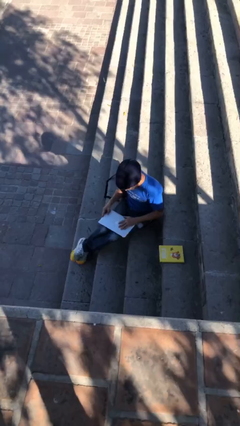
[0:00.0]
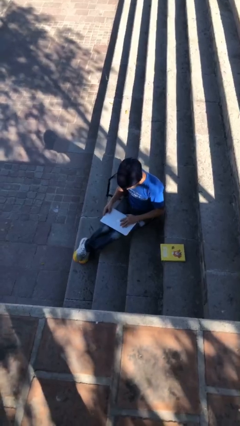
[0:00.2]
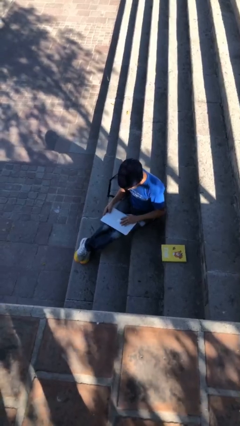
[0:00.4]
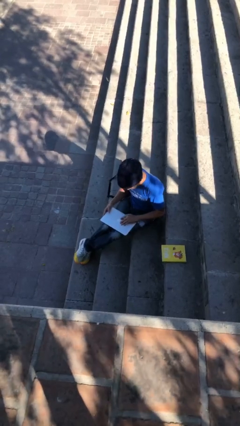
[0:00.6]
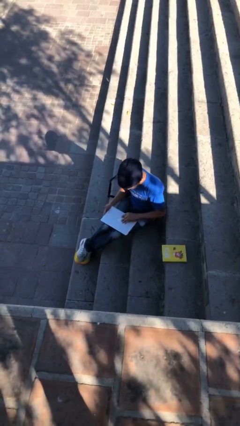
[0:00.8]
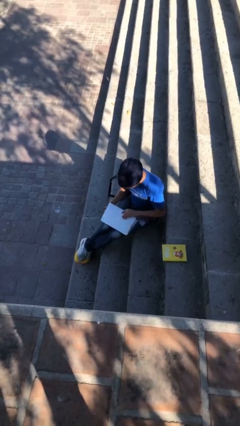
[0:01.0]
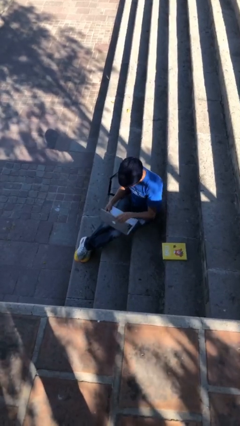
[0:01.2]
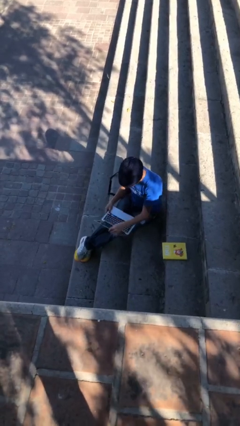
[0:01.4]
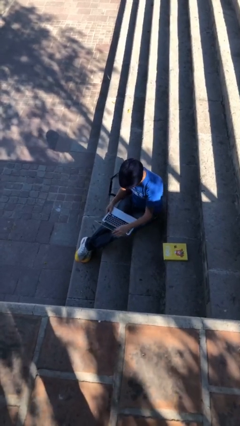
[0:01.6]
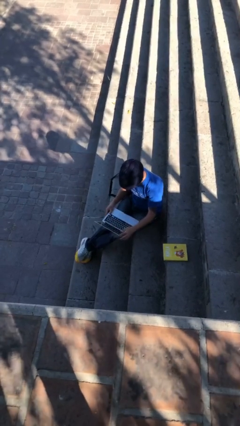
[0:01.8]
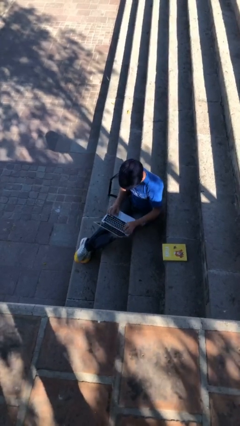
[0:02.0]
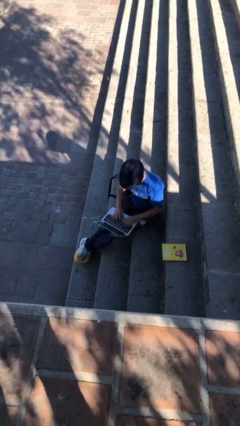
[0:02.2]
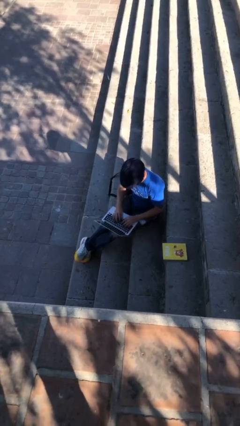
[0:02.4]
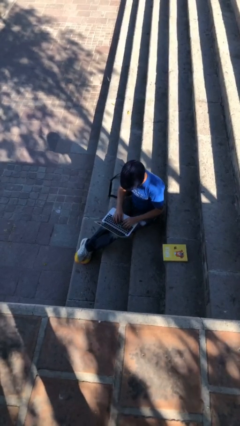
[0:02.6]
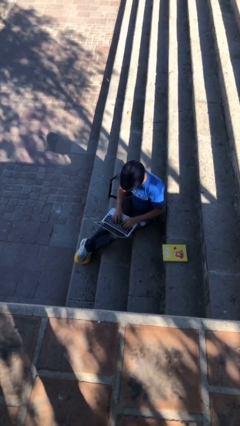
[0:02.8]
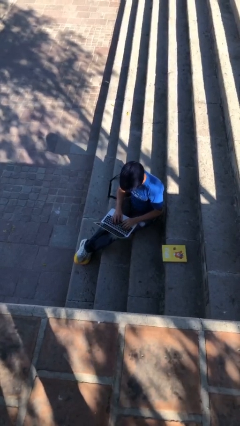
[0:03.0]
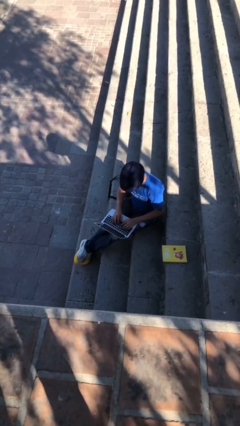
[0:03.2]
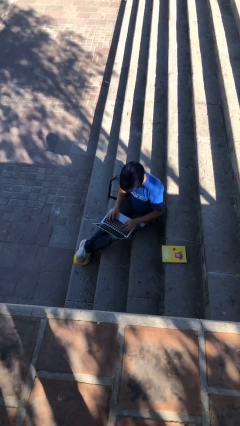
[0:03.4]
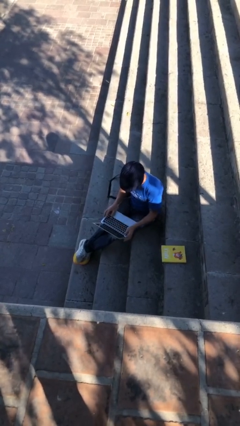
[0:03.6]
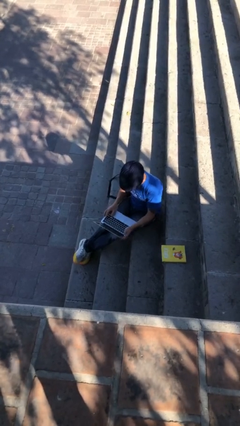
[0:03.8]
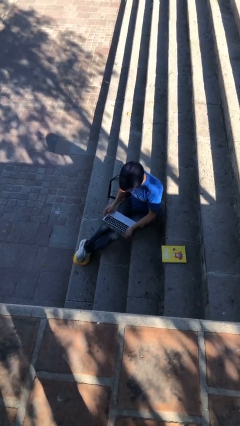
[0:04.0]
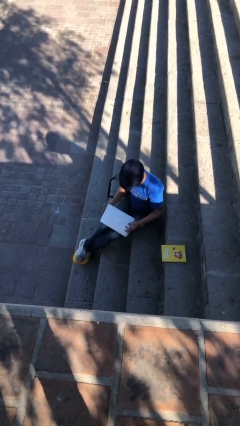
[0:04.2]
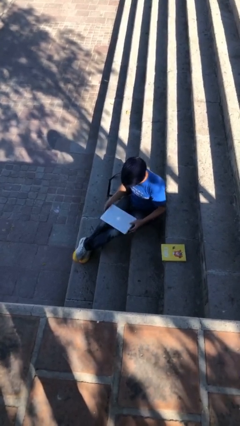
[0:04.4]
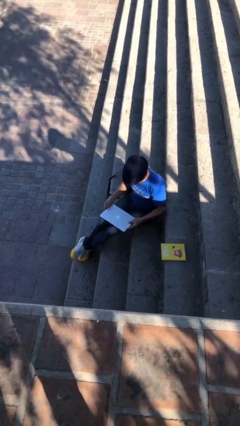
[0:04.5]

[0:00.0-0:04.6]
person interacts with laptop

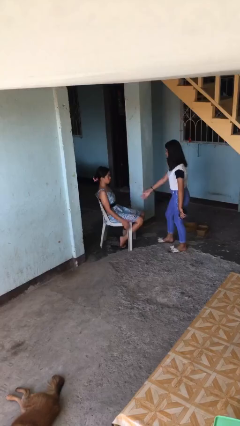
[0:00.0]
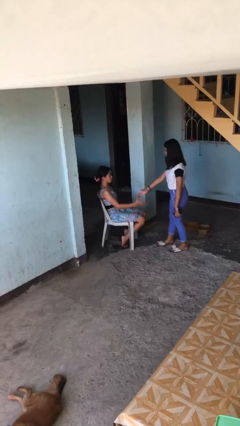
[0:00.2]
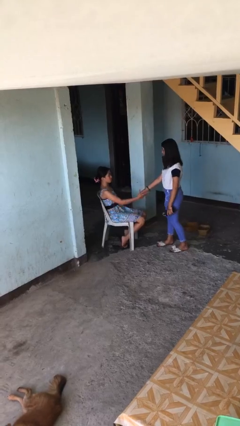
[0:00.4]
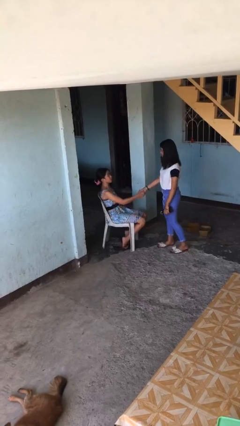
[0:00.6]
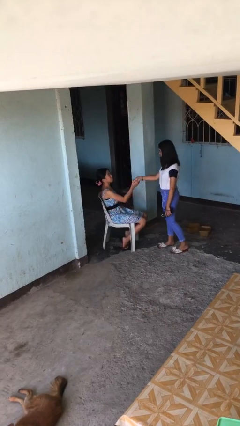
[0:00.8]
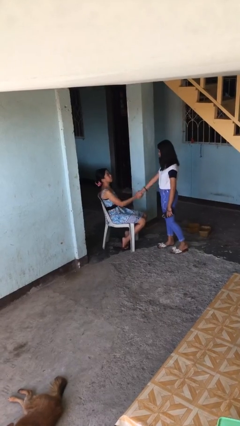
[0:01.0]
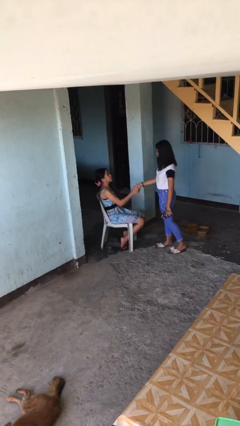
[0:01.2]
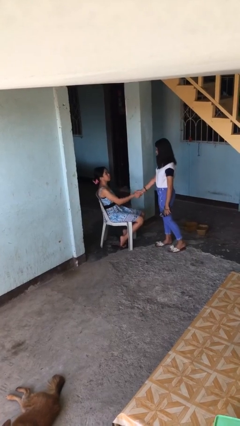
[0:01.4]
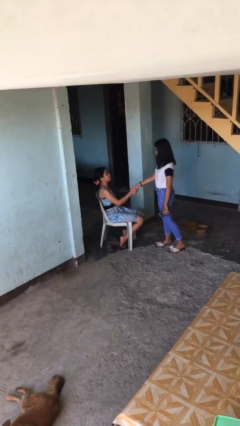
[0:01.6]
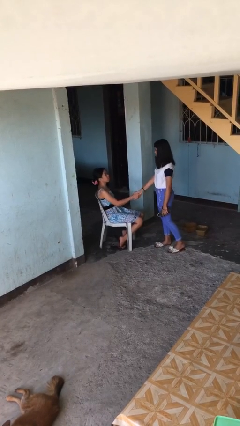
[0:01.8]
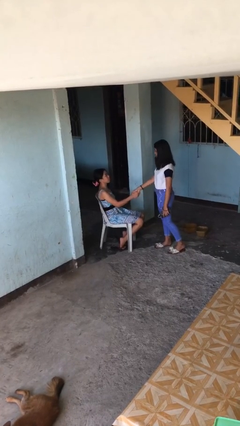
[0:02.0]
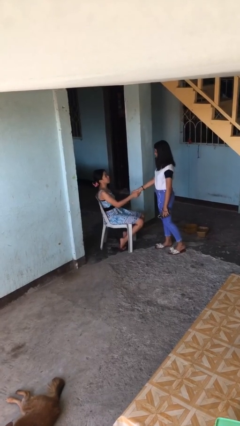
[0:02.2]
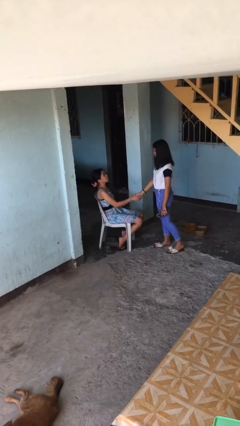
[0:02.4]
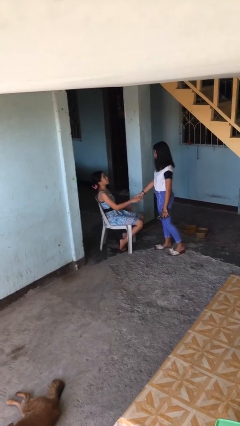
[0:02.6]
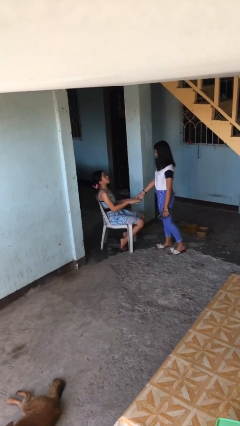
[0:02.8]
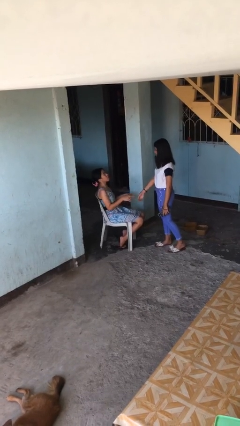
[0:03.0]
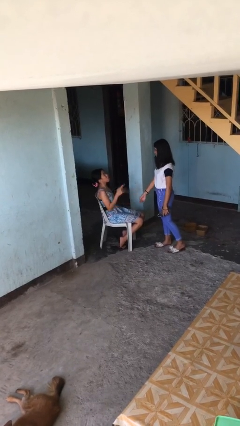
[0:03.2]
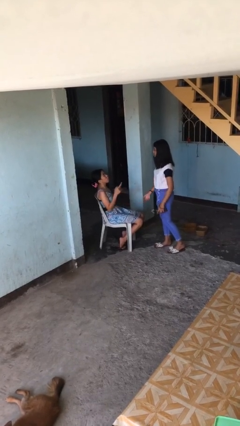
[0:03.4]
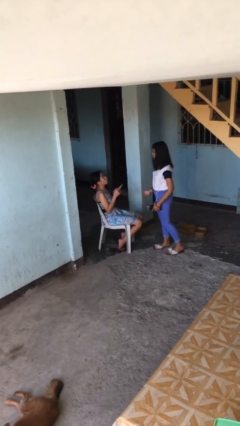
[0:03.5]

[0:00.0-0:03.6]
person shakes hand

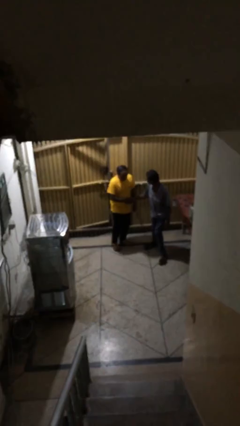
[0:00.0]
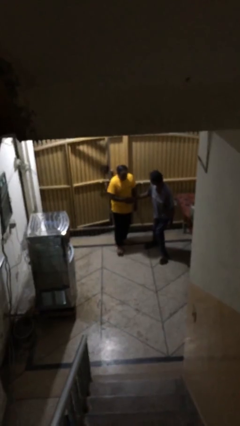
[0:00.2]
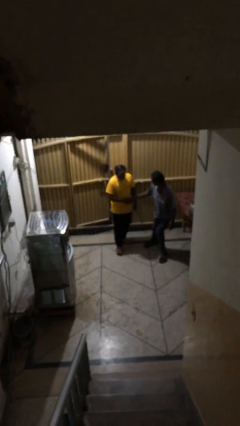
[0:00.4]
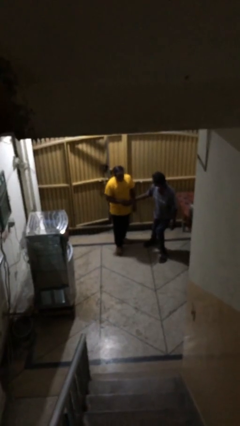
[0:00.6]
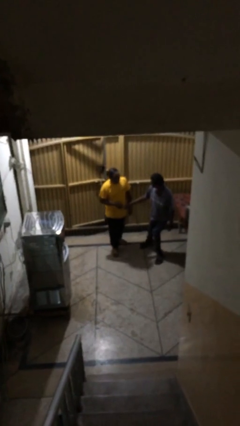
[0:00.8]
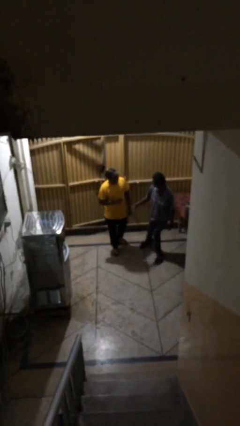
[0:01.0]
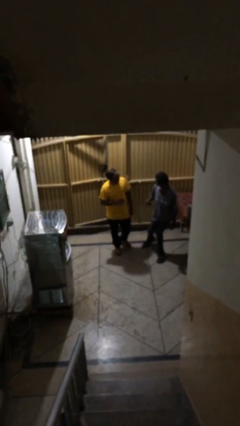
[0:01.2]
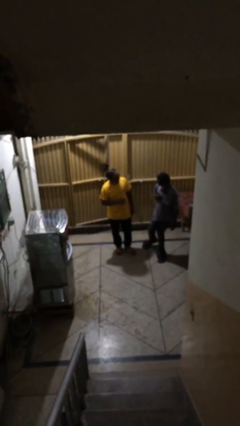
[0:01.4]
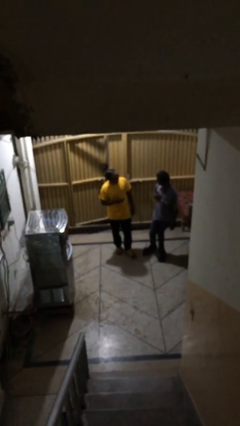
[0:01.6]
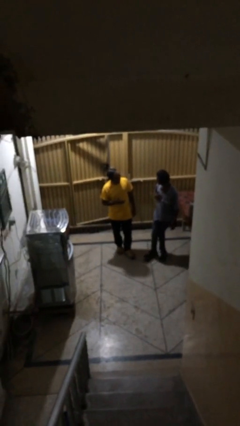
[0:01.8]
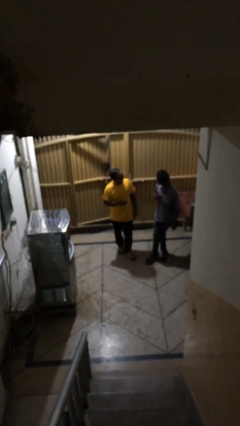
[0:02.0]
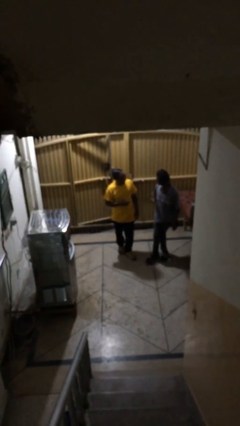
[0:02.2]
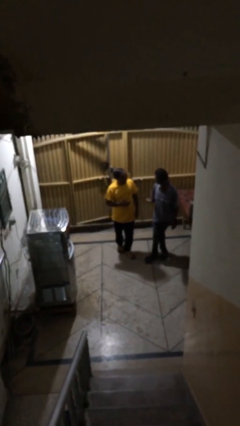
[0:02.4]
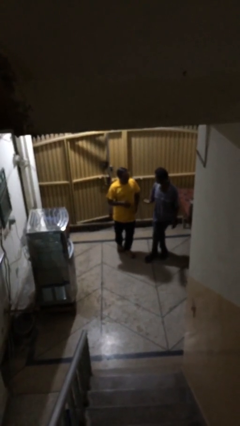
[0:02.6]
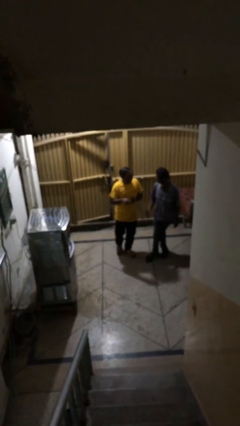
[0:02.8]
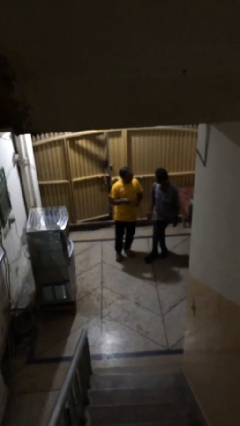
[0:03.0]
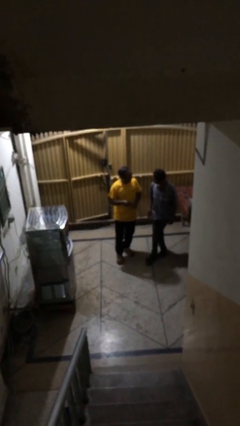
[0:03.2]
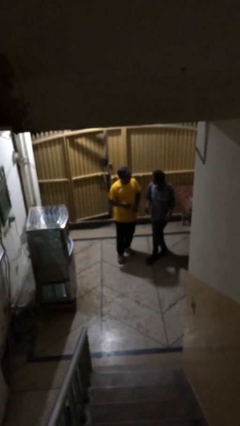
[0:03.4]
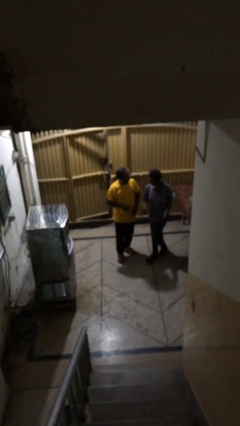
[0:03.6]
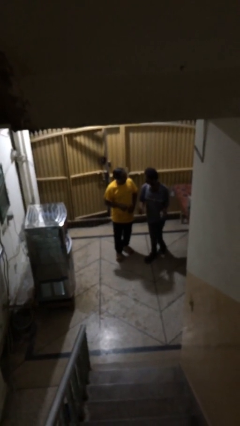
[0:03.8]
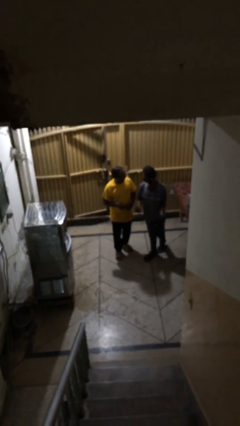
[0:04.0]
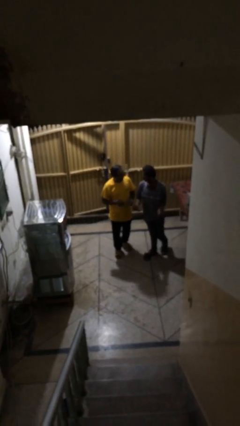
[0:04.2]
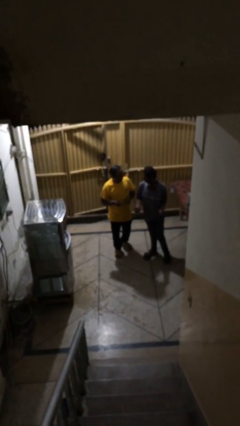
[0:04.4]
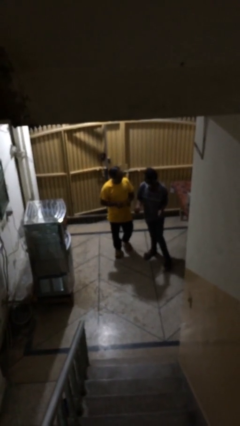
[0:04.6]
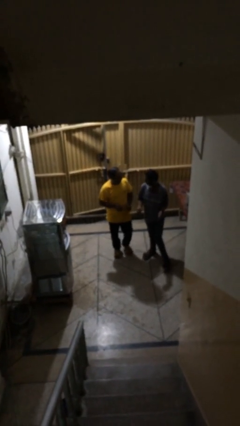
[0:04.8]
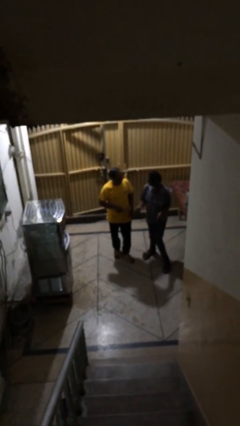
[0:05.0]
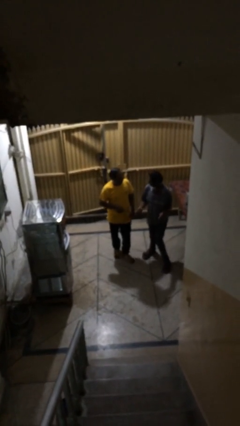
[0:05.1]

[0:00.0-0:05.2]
person talks to person

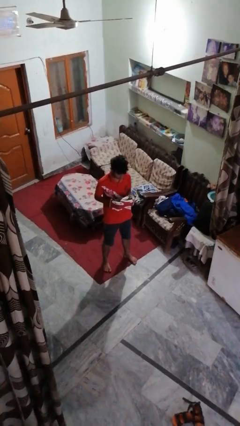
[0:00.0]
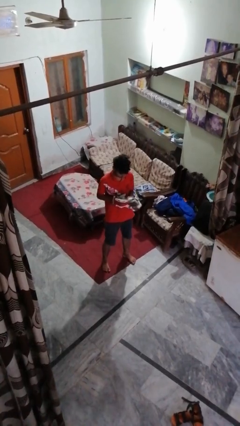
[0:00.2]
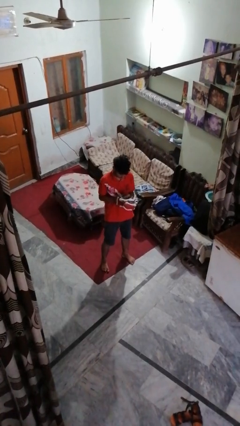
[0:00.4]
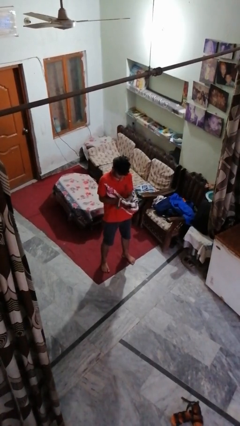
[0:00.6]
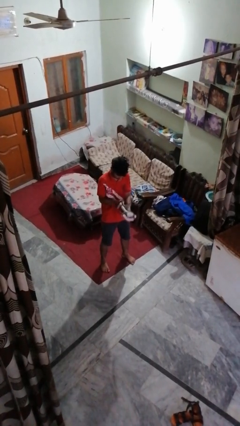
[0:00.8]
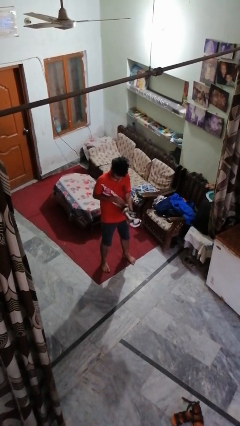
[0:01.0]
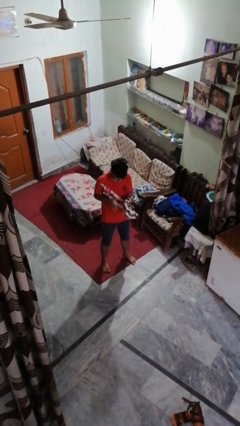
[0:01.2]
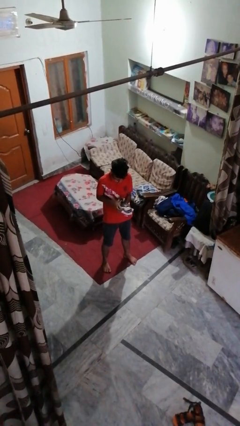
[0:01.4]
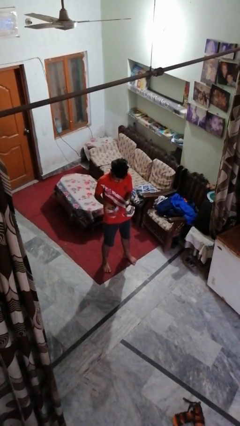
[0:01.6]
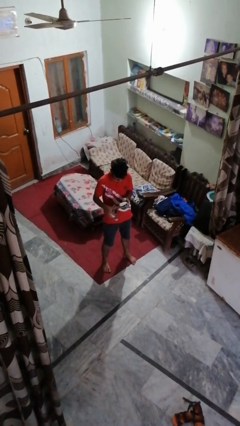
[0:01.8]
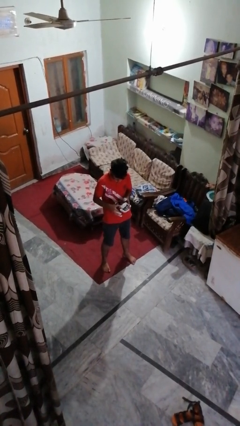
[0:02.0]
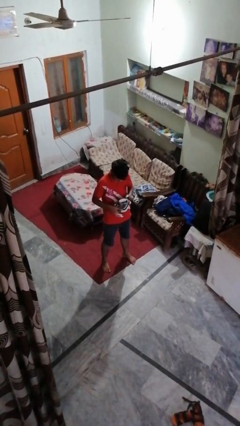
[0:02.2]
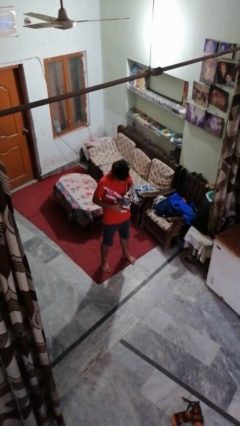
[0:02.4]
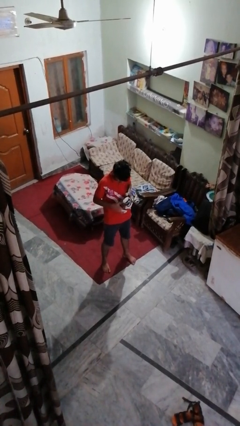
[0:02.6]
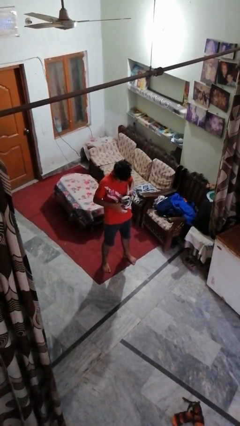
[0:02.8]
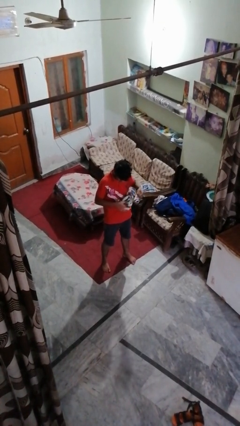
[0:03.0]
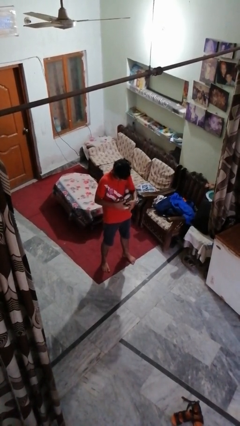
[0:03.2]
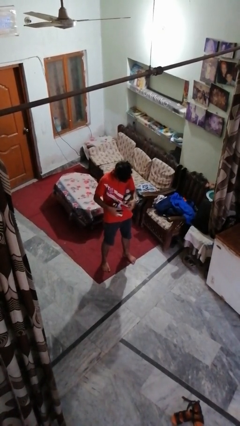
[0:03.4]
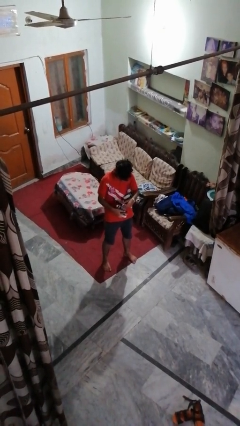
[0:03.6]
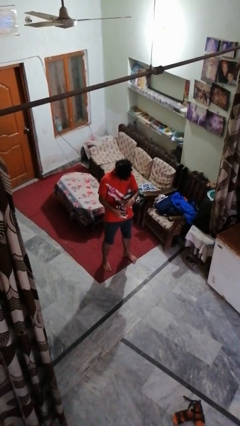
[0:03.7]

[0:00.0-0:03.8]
person takes off gloves

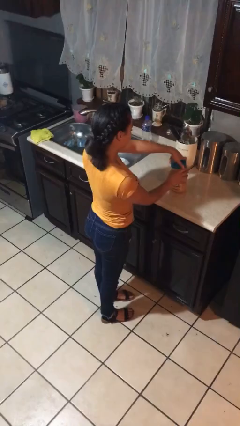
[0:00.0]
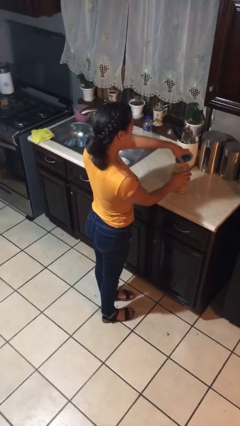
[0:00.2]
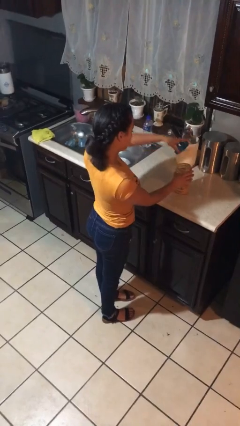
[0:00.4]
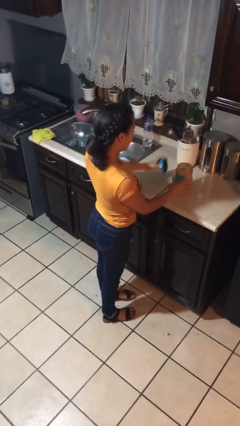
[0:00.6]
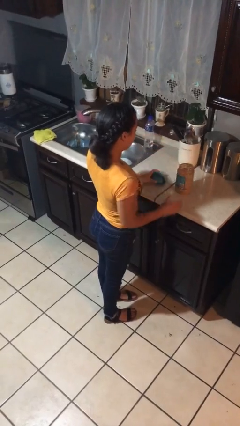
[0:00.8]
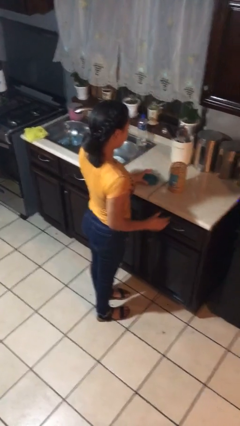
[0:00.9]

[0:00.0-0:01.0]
person opens jar
